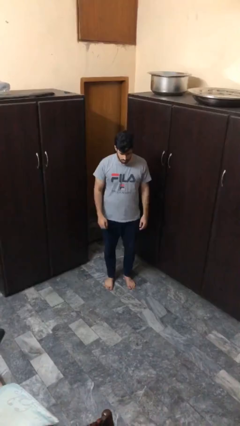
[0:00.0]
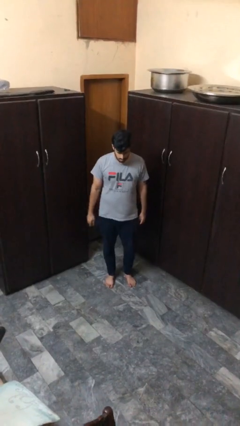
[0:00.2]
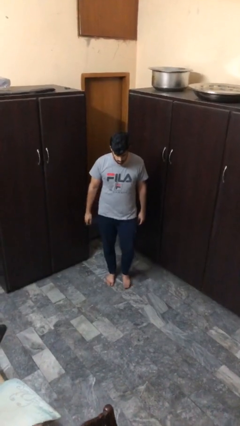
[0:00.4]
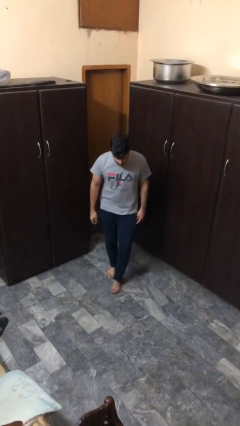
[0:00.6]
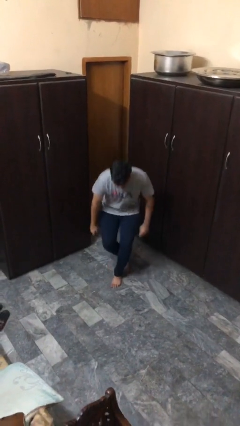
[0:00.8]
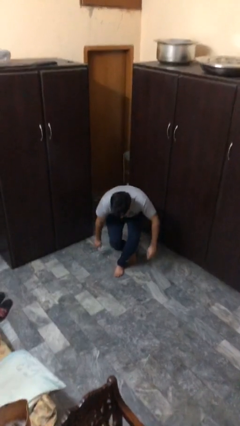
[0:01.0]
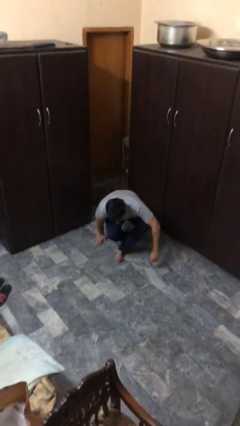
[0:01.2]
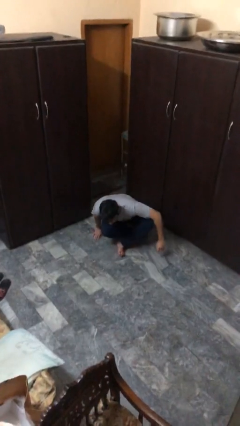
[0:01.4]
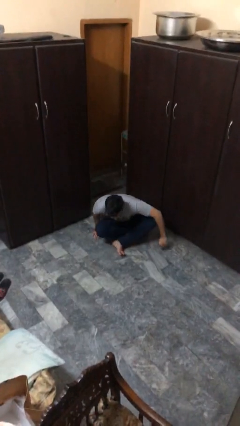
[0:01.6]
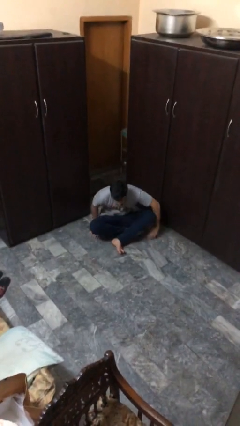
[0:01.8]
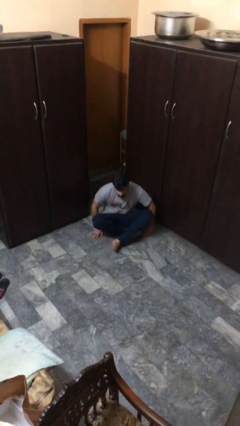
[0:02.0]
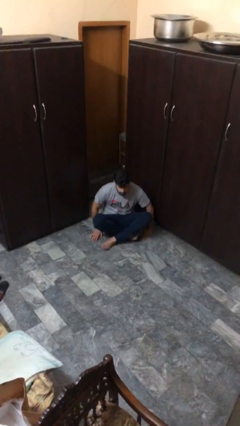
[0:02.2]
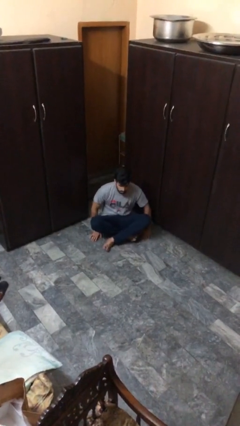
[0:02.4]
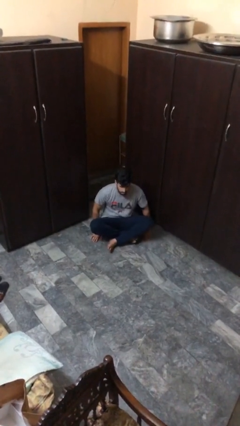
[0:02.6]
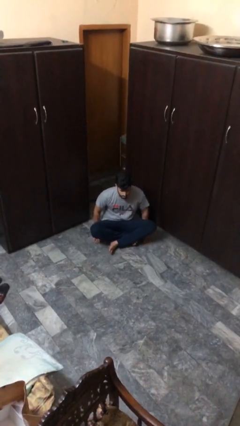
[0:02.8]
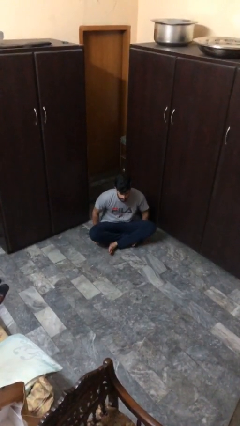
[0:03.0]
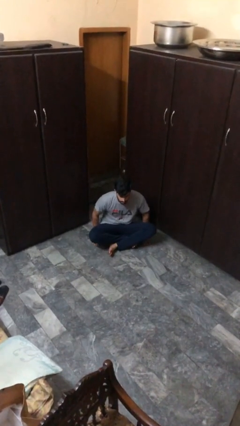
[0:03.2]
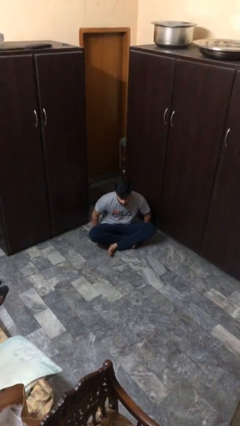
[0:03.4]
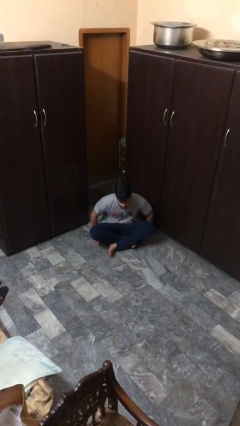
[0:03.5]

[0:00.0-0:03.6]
person sits crisscross

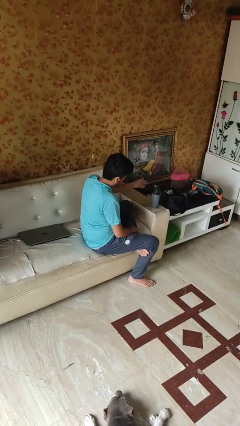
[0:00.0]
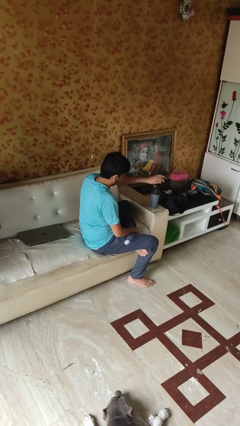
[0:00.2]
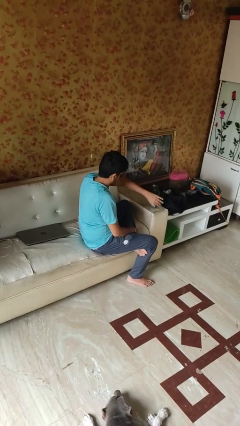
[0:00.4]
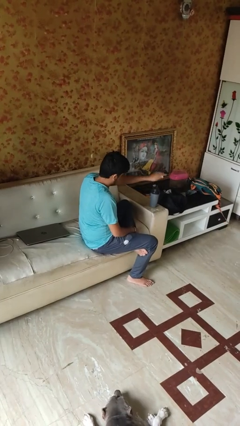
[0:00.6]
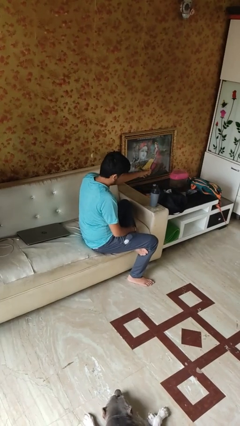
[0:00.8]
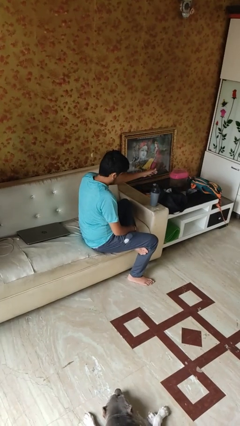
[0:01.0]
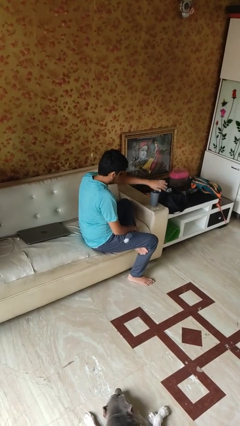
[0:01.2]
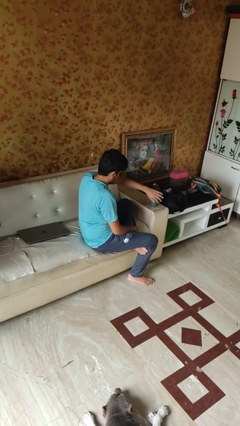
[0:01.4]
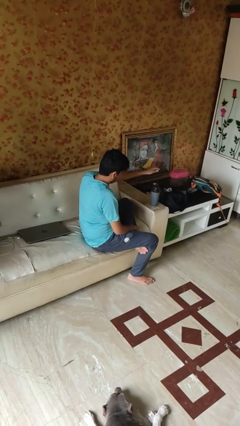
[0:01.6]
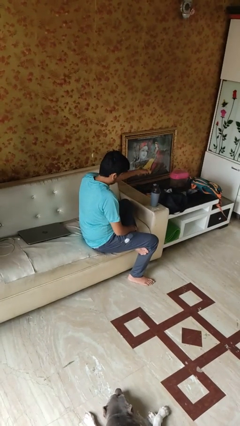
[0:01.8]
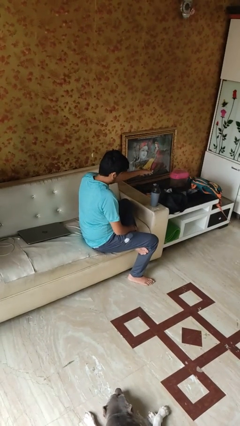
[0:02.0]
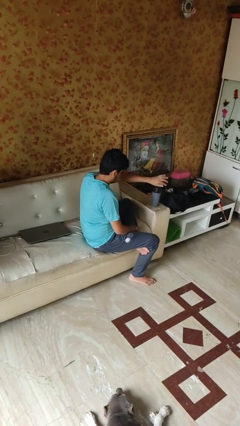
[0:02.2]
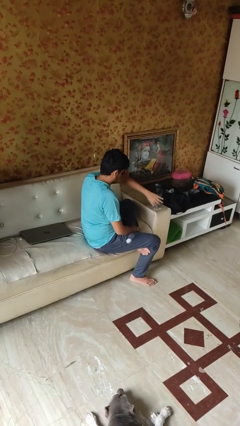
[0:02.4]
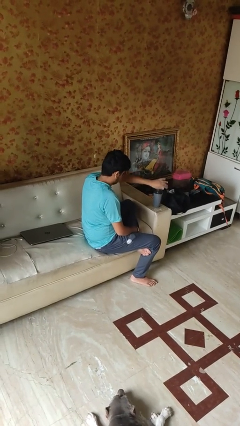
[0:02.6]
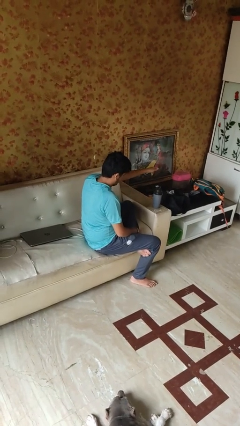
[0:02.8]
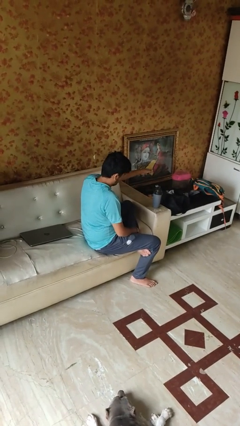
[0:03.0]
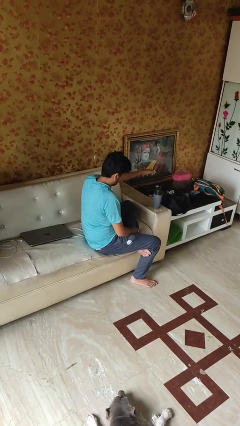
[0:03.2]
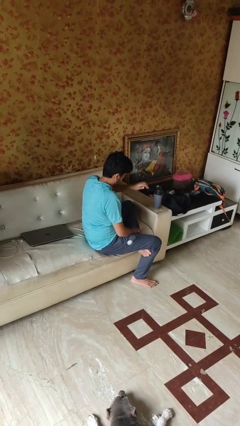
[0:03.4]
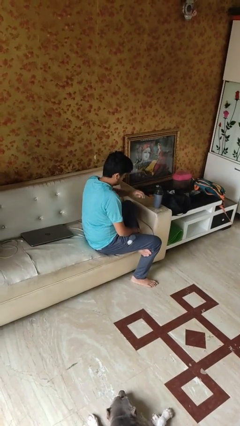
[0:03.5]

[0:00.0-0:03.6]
person waves hand over object

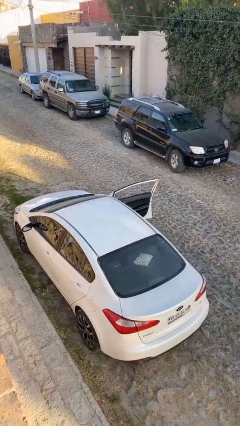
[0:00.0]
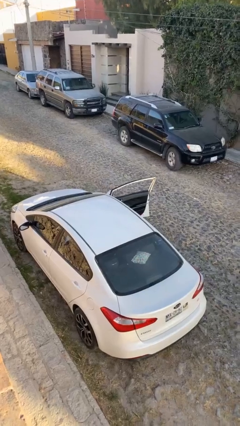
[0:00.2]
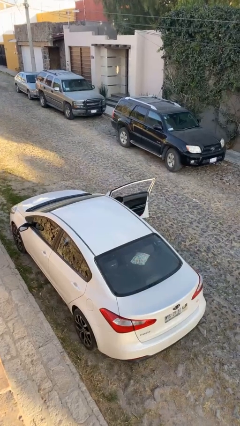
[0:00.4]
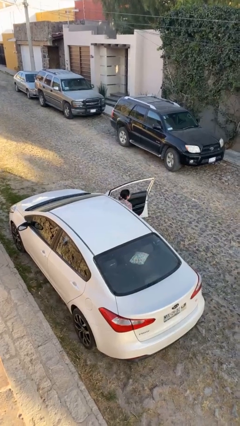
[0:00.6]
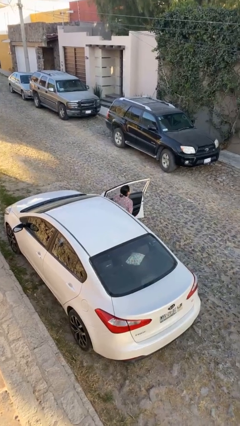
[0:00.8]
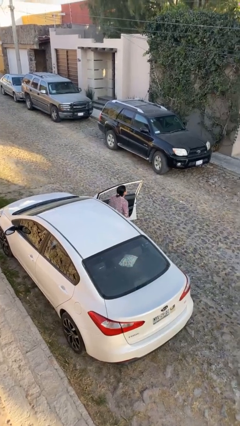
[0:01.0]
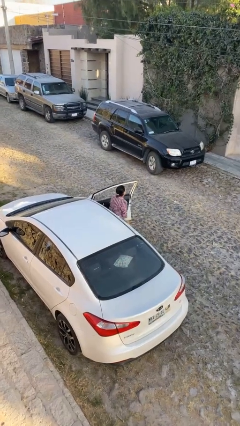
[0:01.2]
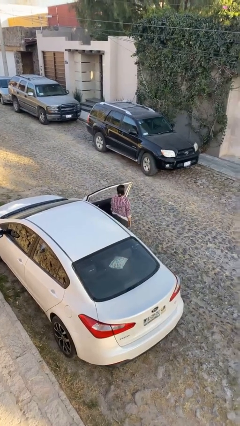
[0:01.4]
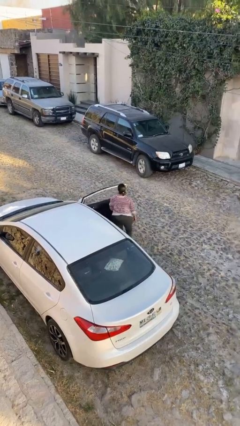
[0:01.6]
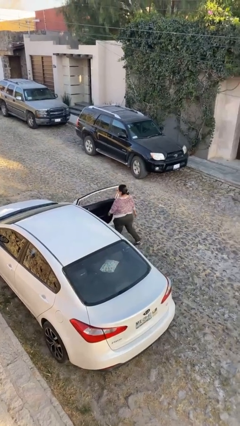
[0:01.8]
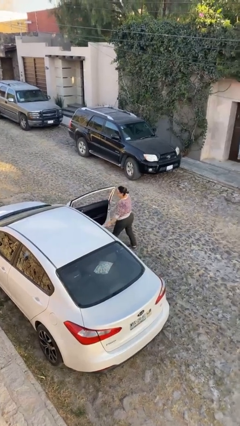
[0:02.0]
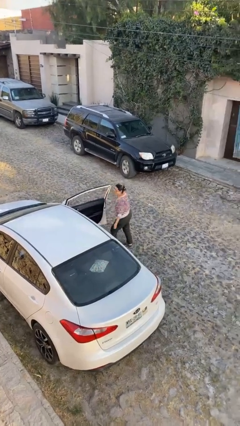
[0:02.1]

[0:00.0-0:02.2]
person exits car

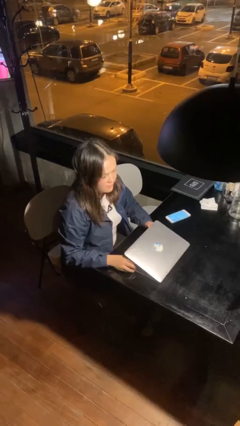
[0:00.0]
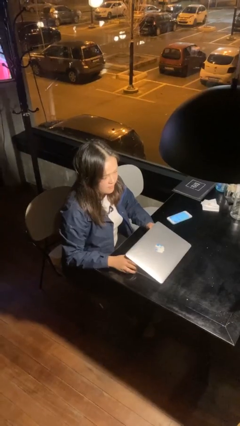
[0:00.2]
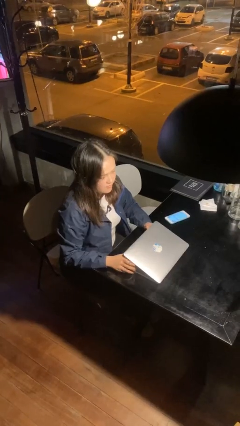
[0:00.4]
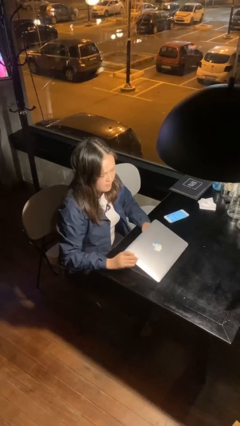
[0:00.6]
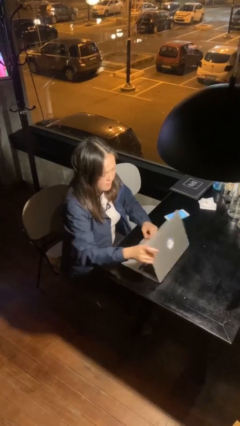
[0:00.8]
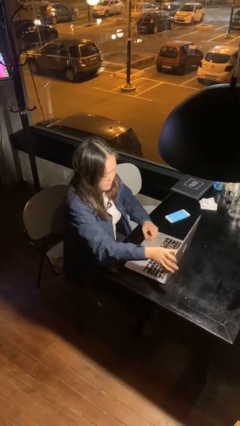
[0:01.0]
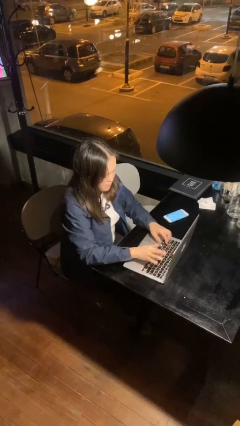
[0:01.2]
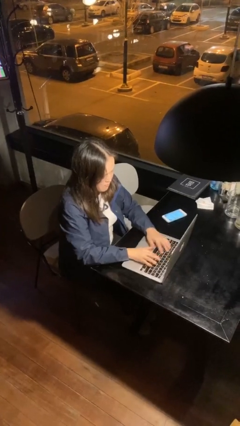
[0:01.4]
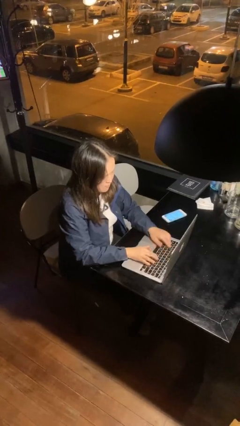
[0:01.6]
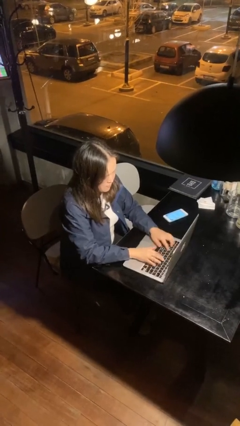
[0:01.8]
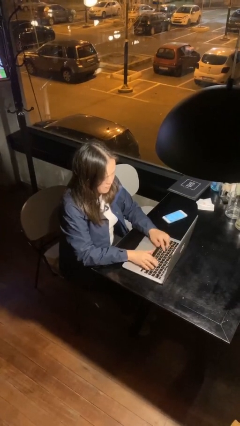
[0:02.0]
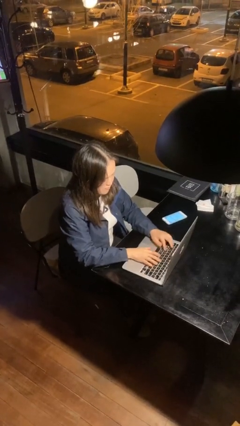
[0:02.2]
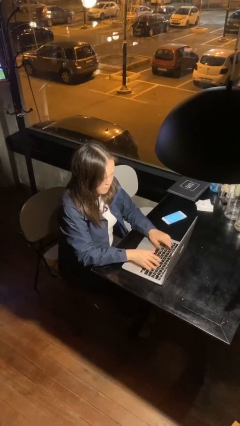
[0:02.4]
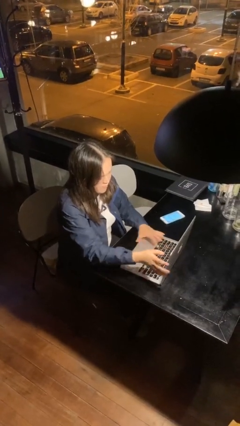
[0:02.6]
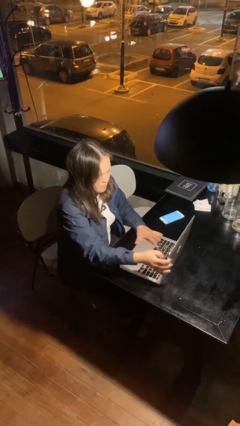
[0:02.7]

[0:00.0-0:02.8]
person interacts with laptop

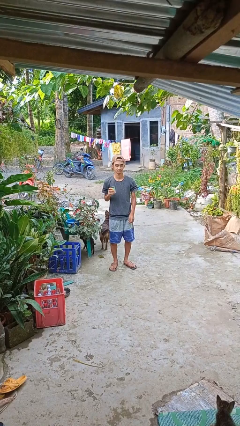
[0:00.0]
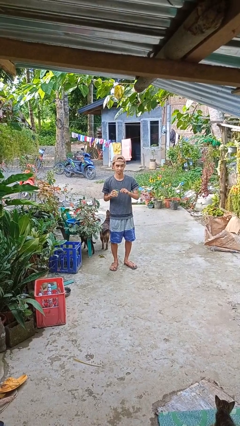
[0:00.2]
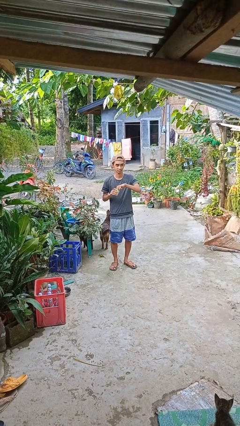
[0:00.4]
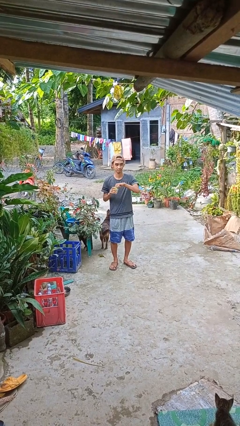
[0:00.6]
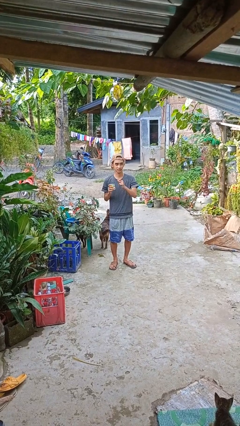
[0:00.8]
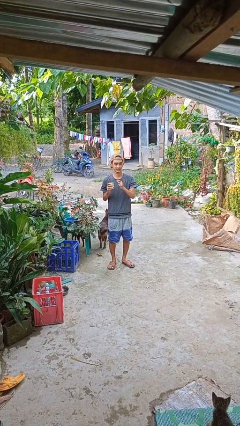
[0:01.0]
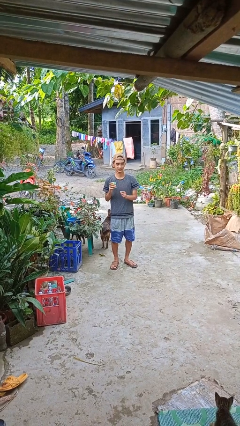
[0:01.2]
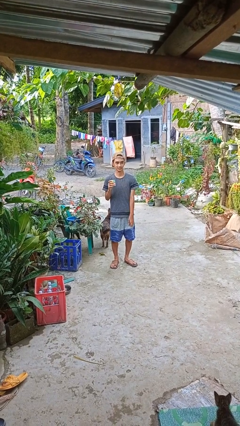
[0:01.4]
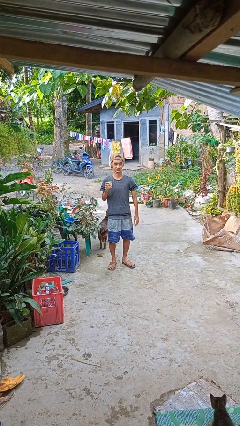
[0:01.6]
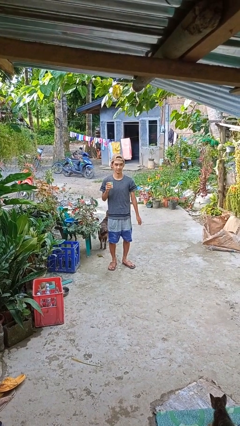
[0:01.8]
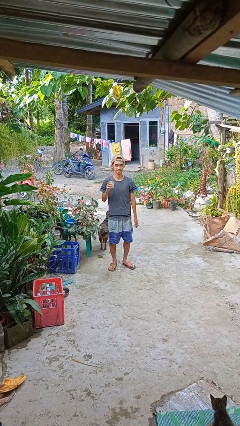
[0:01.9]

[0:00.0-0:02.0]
person opens beverage can

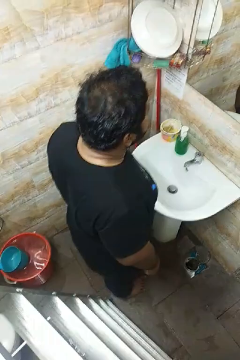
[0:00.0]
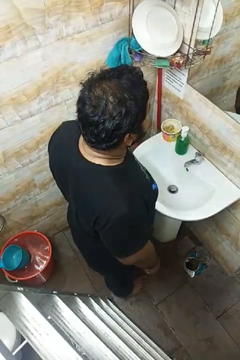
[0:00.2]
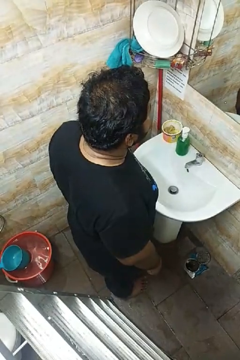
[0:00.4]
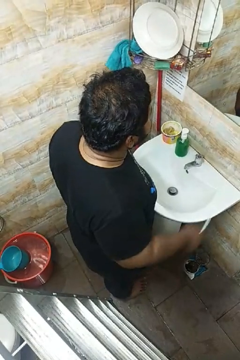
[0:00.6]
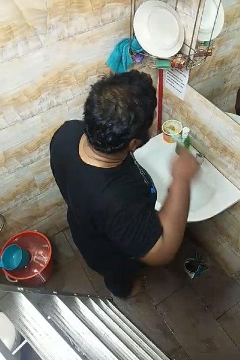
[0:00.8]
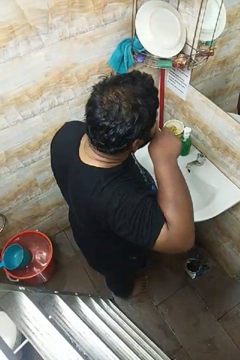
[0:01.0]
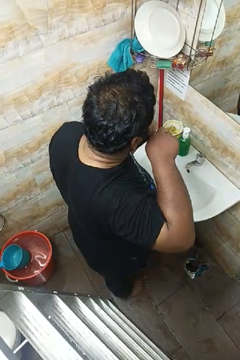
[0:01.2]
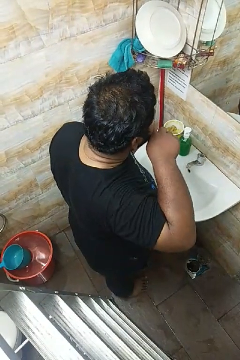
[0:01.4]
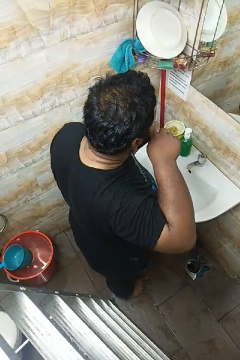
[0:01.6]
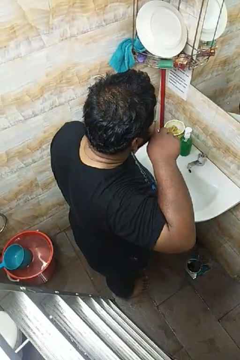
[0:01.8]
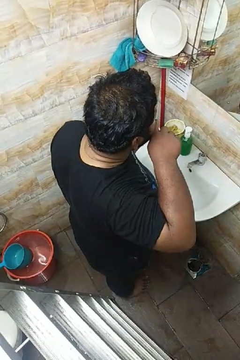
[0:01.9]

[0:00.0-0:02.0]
person brushes teeth

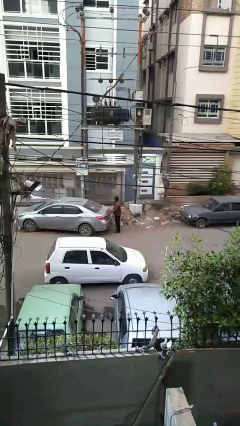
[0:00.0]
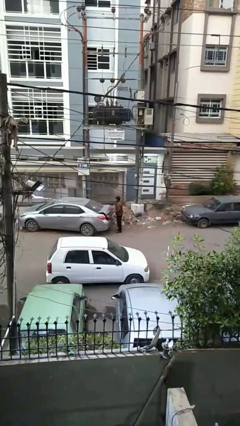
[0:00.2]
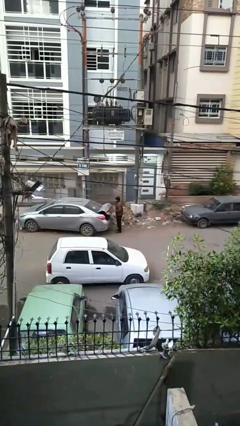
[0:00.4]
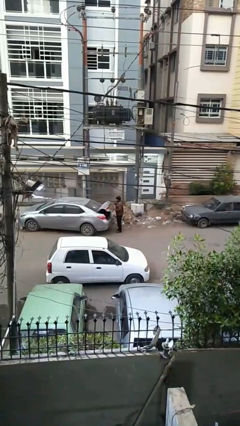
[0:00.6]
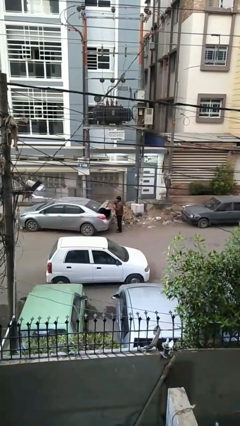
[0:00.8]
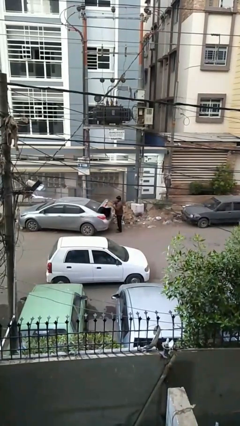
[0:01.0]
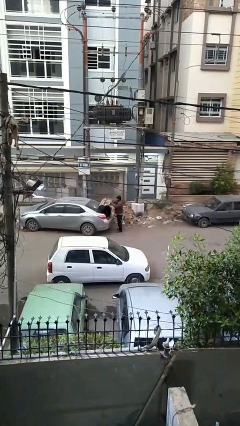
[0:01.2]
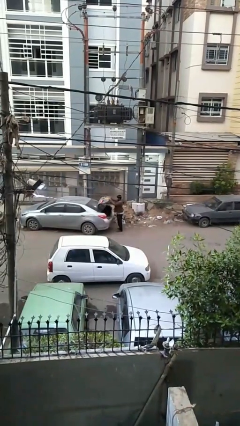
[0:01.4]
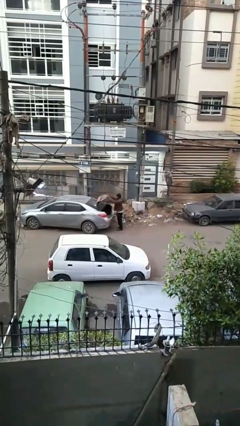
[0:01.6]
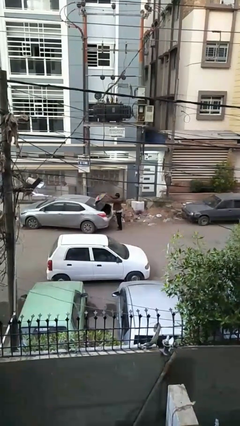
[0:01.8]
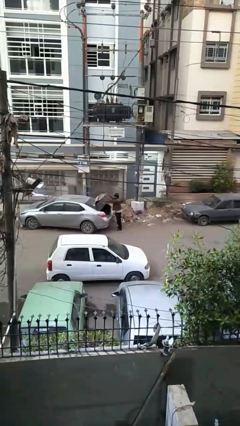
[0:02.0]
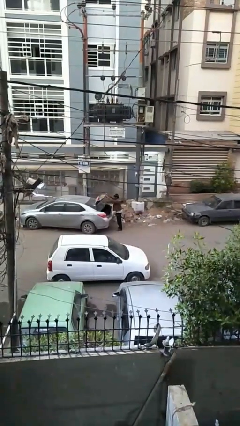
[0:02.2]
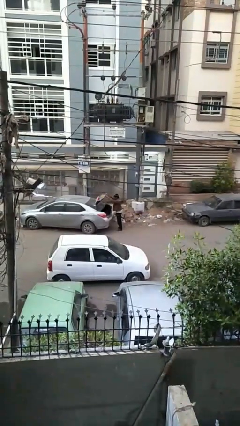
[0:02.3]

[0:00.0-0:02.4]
person opens car trunk
